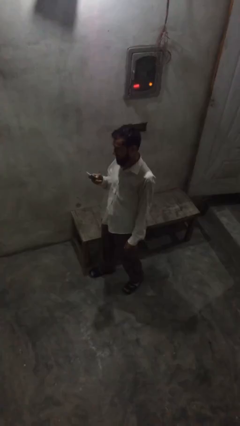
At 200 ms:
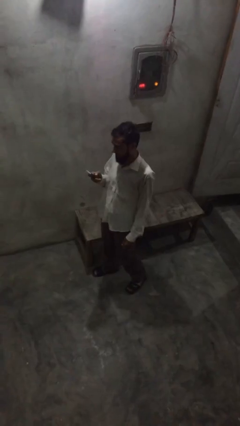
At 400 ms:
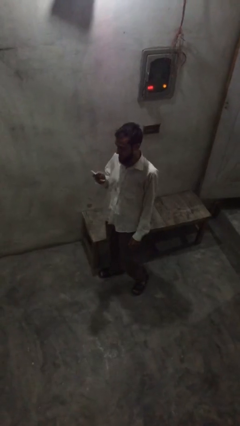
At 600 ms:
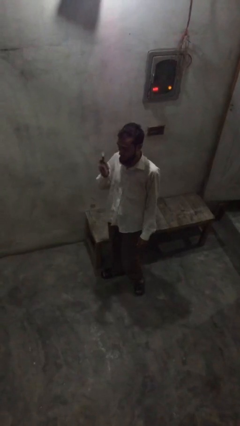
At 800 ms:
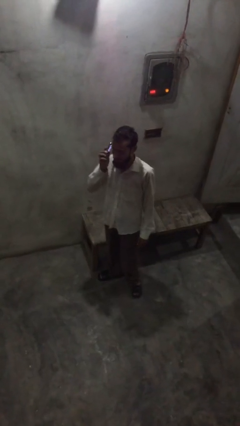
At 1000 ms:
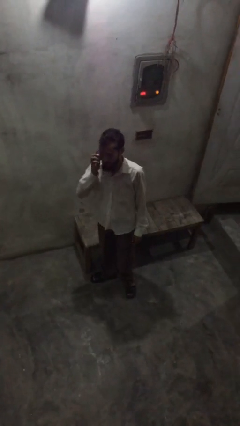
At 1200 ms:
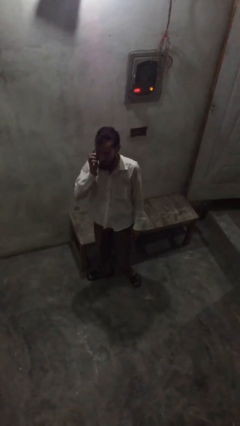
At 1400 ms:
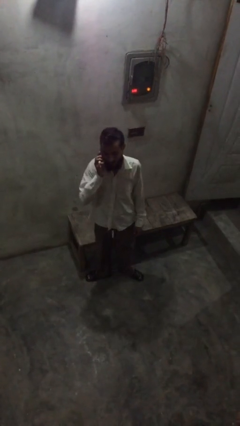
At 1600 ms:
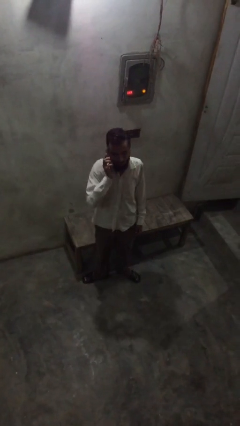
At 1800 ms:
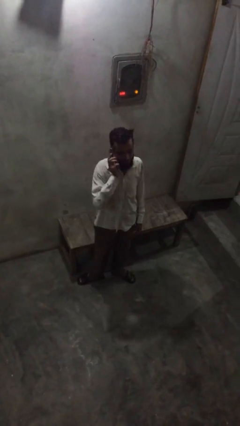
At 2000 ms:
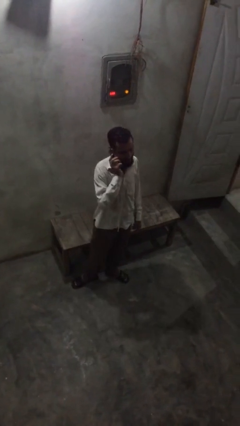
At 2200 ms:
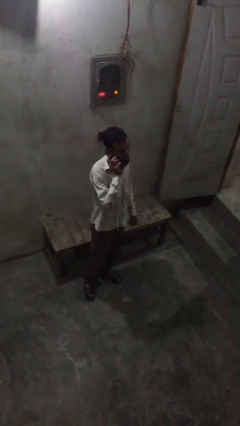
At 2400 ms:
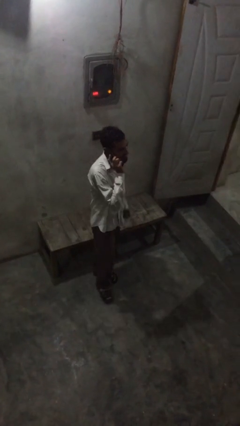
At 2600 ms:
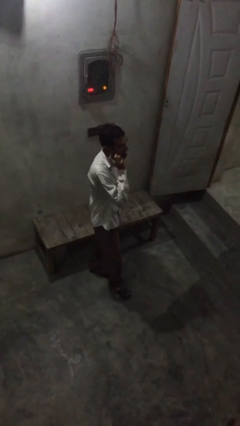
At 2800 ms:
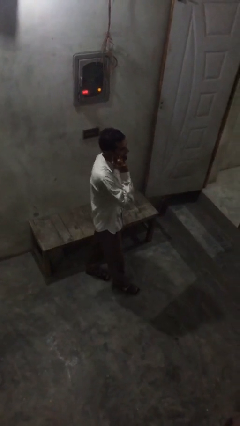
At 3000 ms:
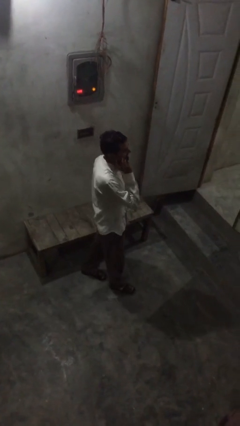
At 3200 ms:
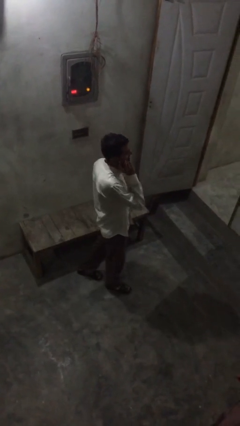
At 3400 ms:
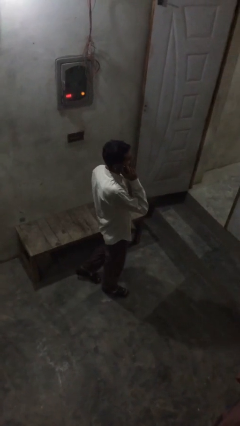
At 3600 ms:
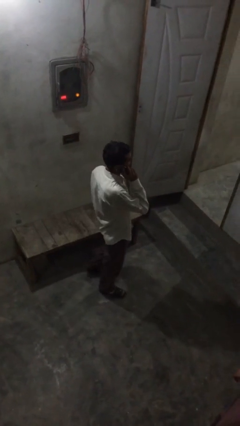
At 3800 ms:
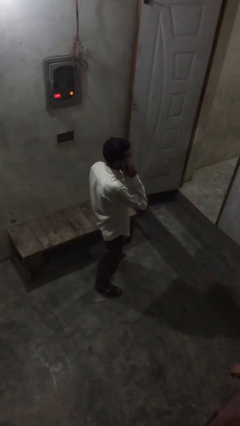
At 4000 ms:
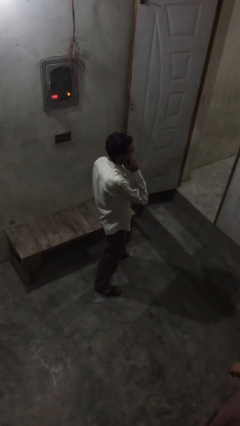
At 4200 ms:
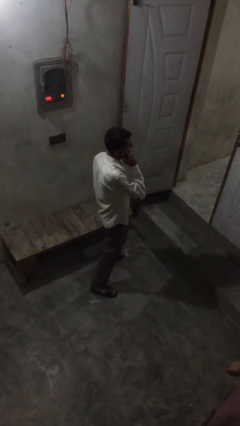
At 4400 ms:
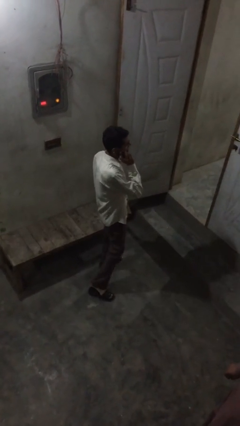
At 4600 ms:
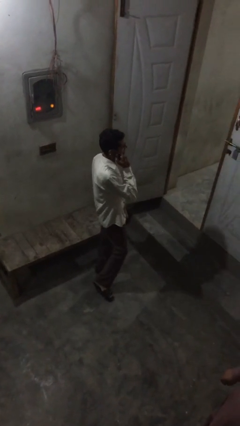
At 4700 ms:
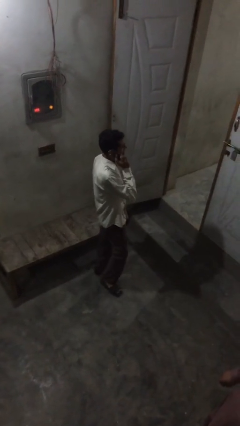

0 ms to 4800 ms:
person talks on phone

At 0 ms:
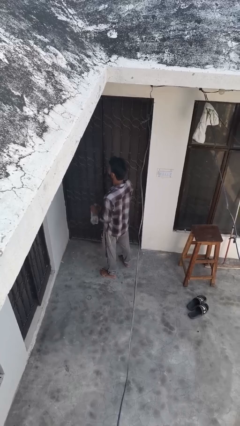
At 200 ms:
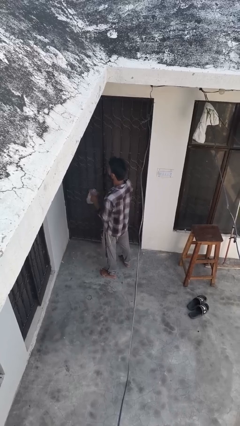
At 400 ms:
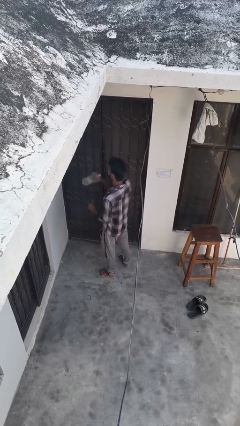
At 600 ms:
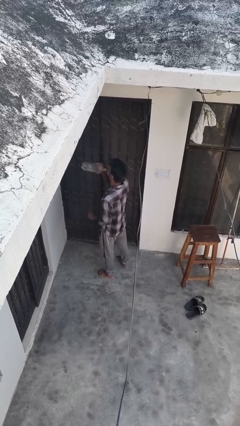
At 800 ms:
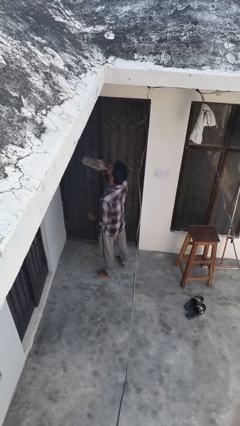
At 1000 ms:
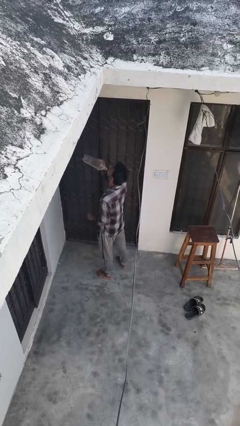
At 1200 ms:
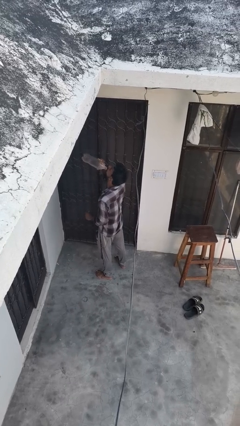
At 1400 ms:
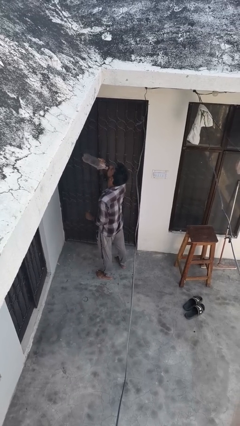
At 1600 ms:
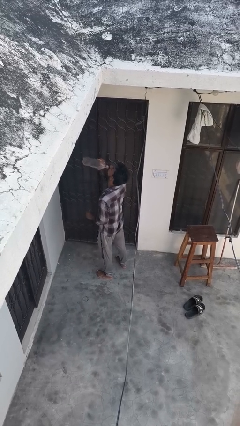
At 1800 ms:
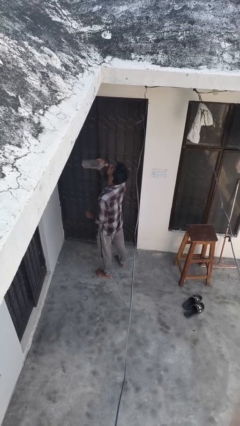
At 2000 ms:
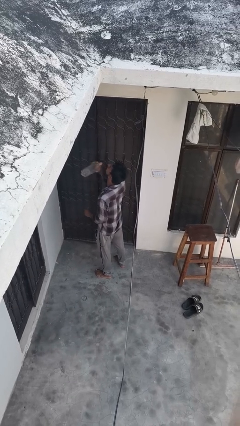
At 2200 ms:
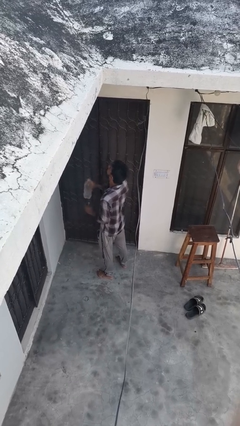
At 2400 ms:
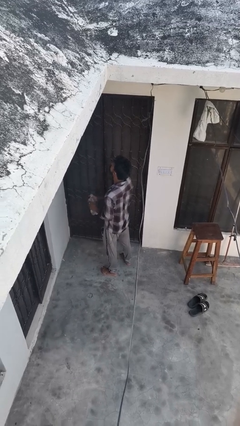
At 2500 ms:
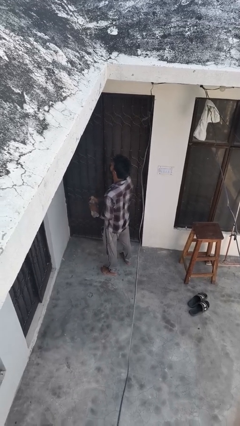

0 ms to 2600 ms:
person drinks from bottle

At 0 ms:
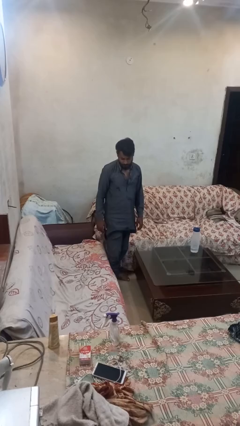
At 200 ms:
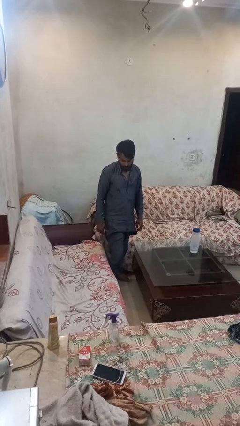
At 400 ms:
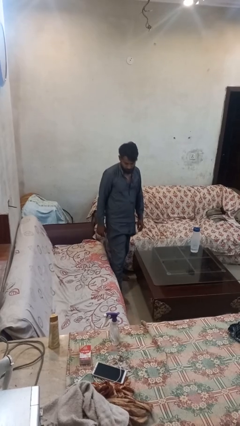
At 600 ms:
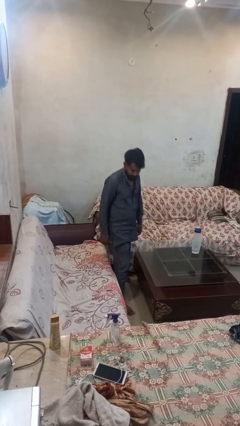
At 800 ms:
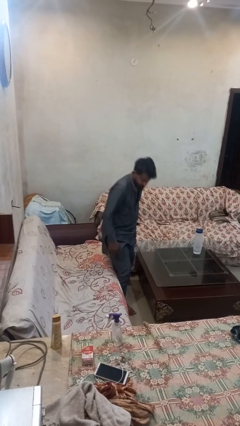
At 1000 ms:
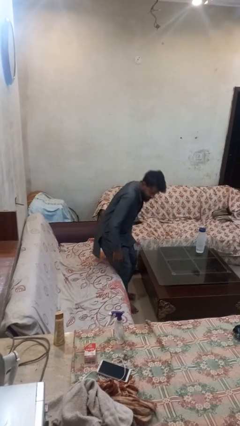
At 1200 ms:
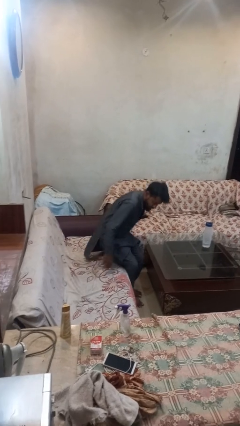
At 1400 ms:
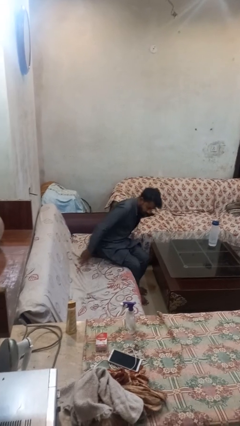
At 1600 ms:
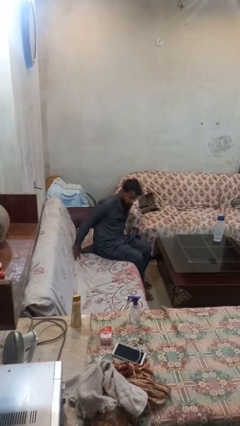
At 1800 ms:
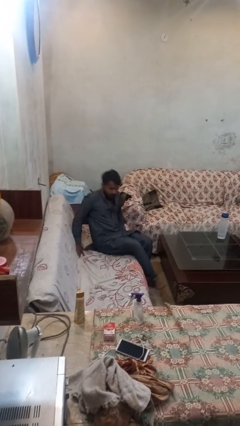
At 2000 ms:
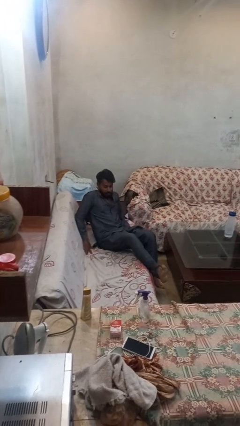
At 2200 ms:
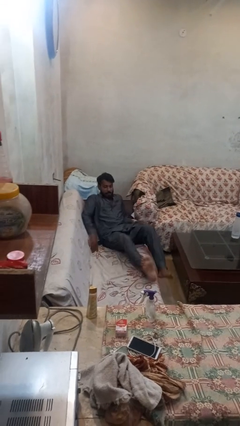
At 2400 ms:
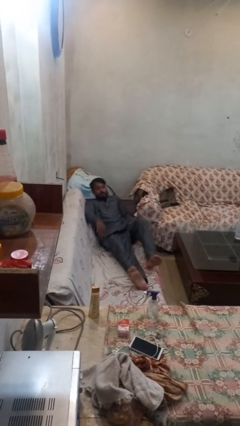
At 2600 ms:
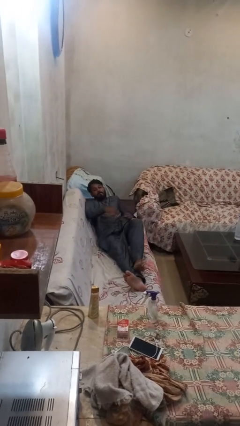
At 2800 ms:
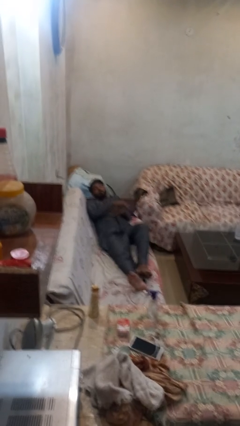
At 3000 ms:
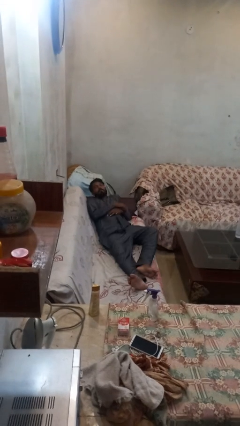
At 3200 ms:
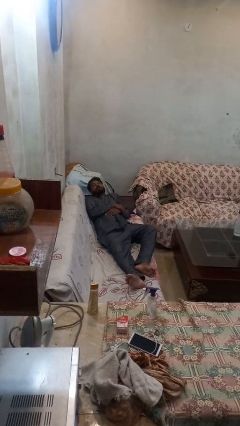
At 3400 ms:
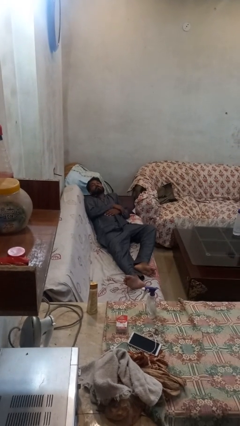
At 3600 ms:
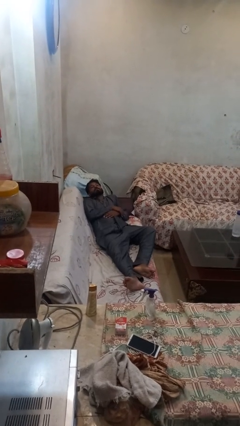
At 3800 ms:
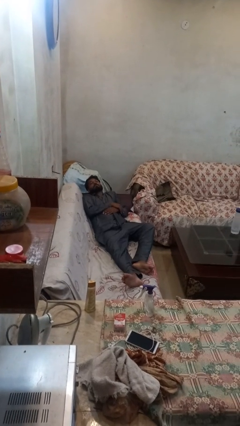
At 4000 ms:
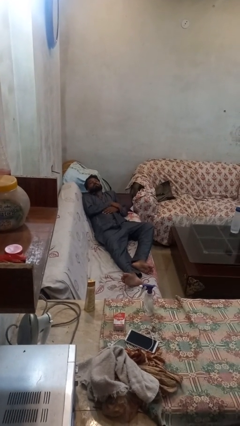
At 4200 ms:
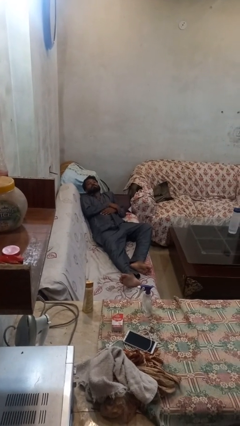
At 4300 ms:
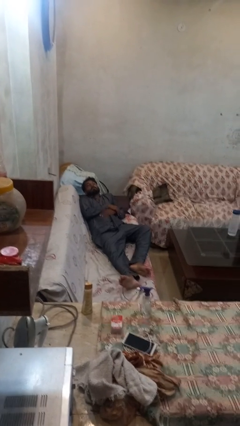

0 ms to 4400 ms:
person lies down on couch

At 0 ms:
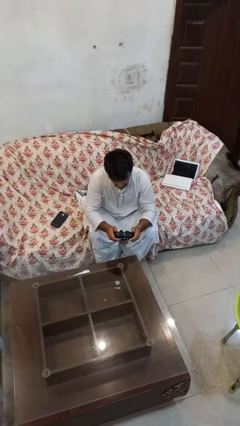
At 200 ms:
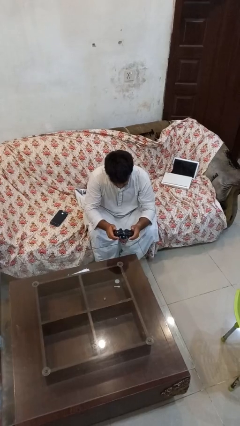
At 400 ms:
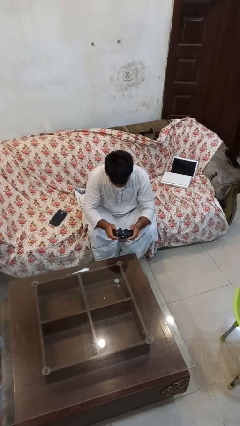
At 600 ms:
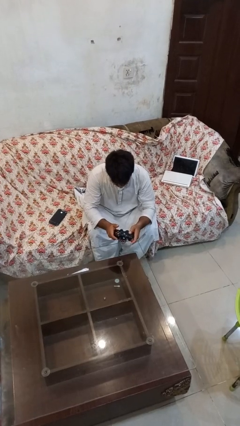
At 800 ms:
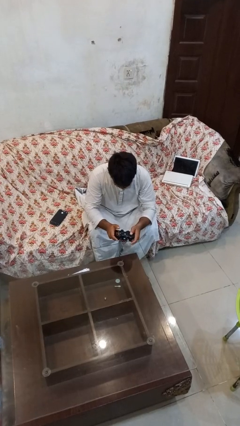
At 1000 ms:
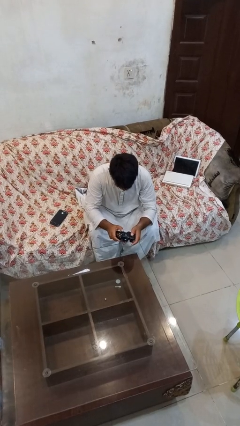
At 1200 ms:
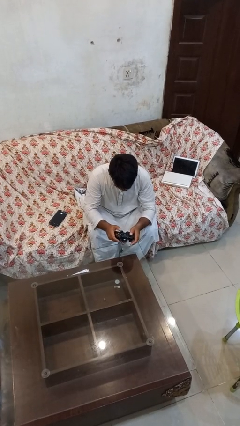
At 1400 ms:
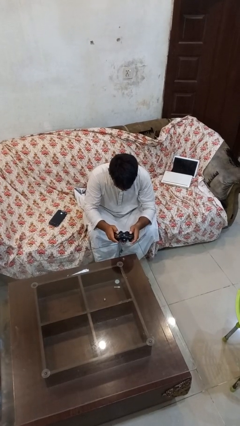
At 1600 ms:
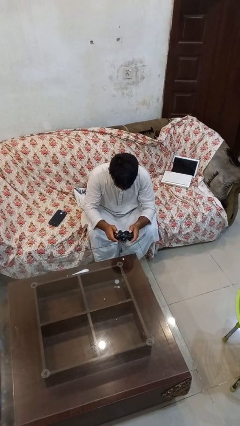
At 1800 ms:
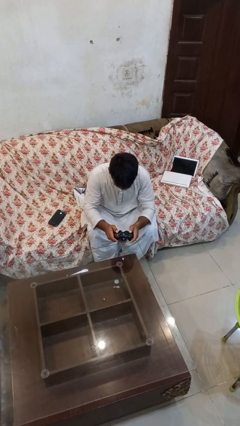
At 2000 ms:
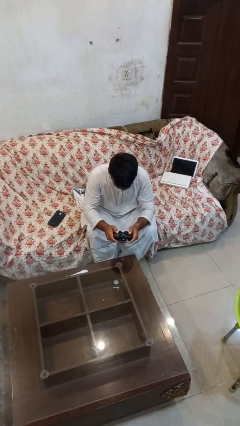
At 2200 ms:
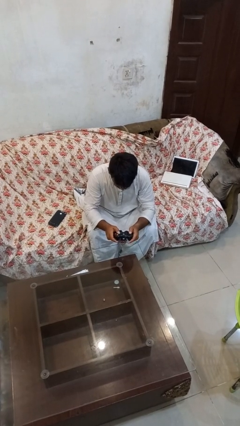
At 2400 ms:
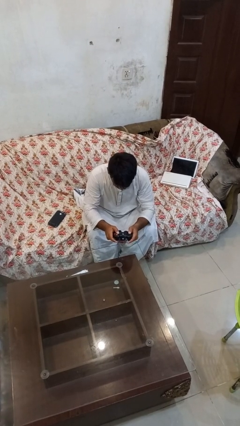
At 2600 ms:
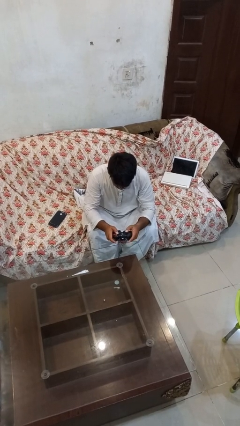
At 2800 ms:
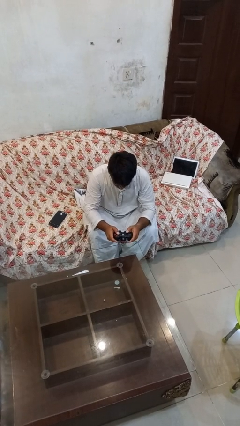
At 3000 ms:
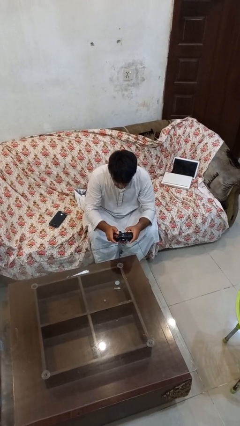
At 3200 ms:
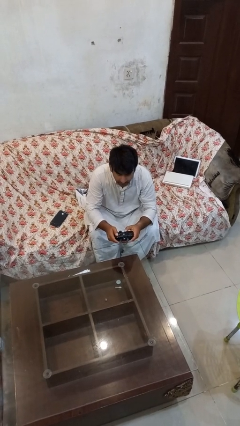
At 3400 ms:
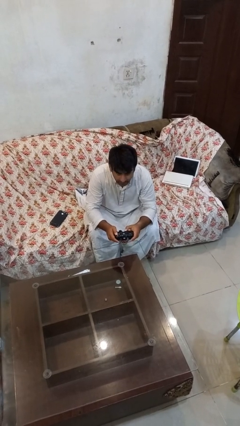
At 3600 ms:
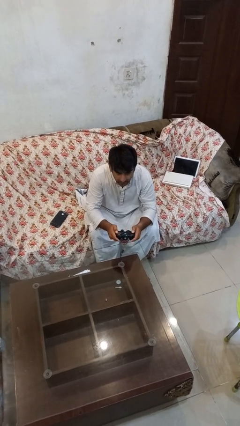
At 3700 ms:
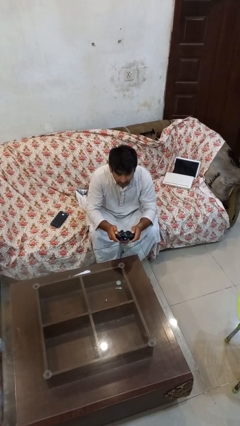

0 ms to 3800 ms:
person interacts with handheld game

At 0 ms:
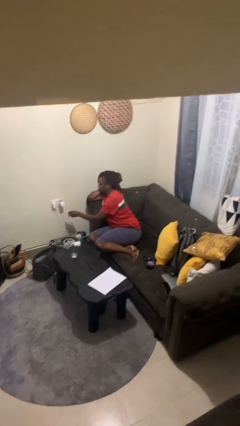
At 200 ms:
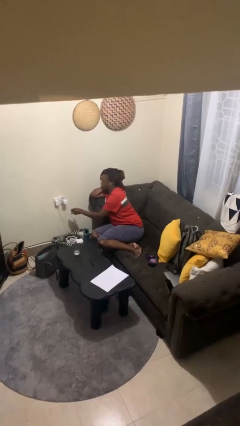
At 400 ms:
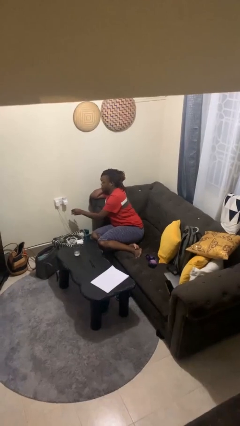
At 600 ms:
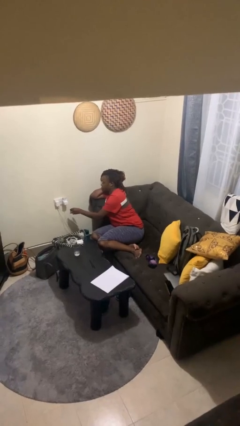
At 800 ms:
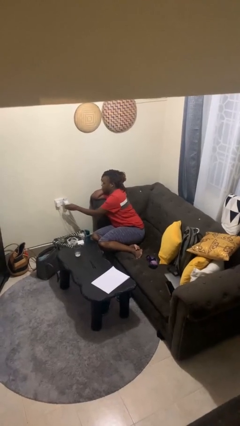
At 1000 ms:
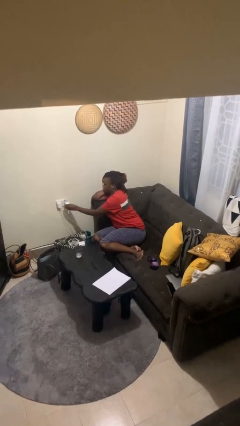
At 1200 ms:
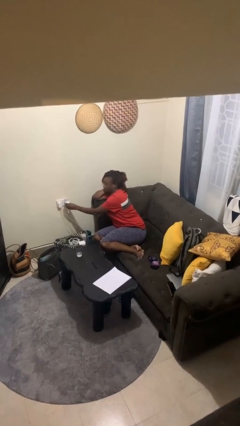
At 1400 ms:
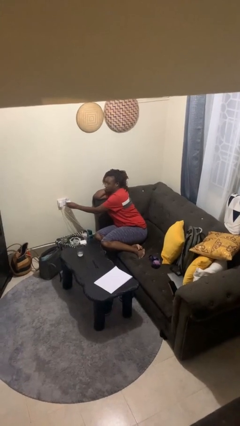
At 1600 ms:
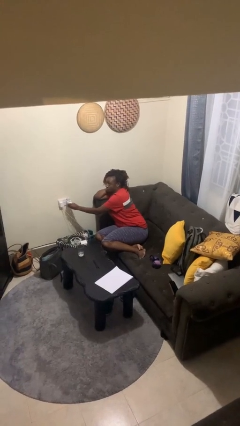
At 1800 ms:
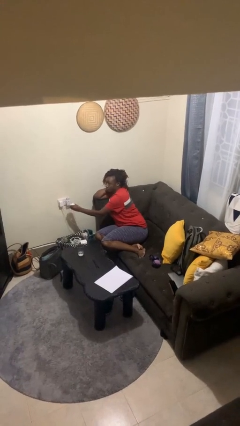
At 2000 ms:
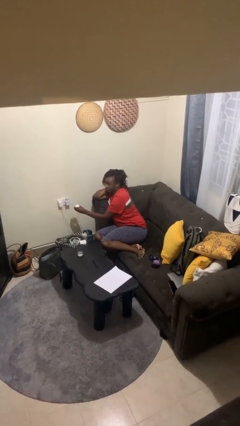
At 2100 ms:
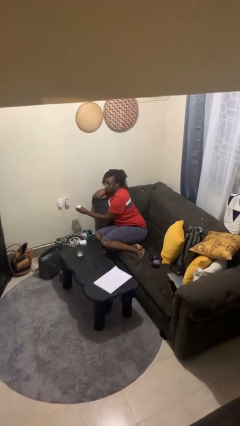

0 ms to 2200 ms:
person unplugs from electrical socket
